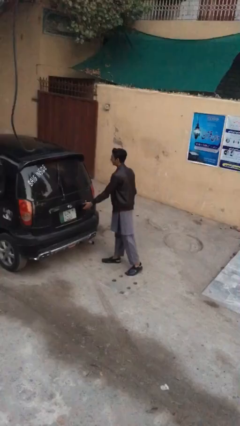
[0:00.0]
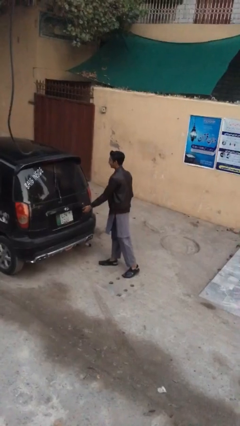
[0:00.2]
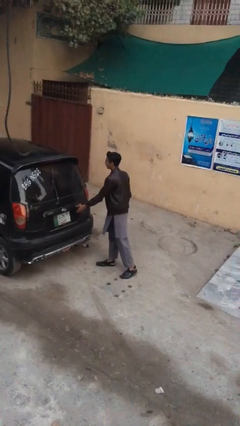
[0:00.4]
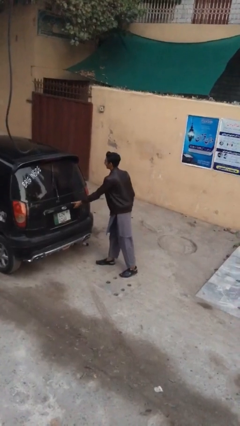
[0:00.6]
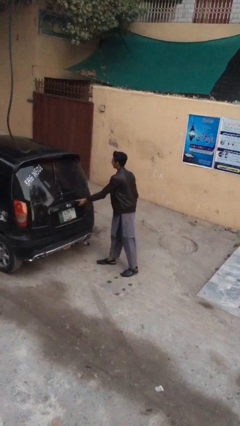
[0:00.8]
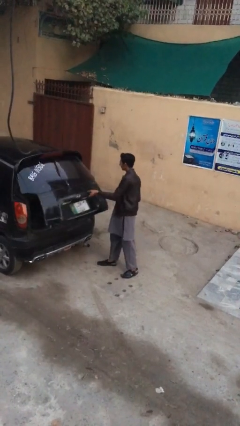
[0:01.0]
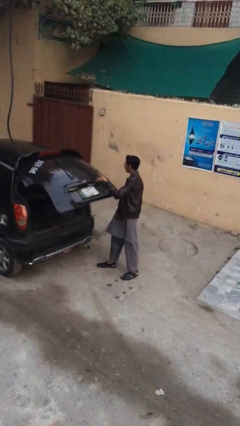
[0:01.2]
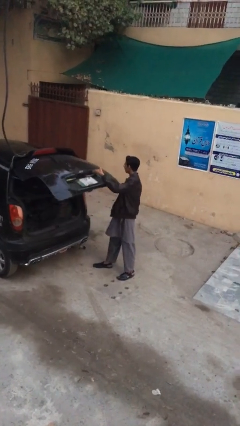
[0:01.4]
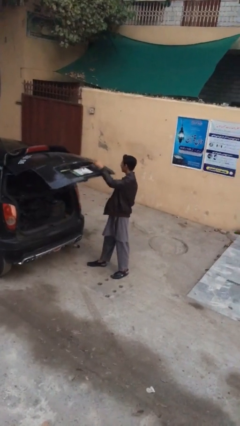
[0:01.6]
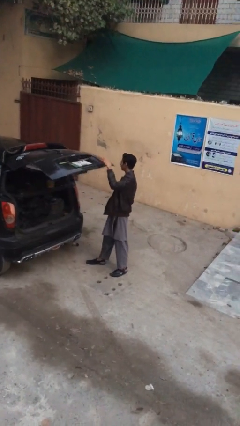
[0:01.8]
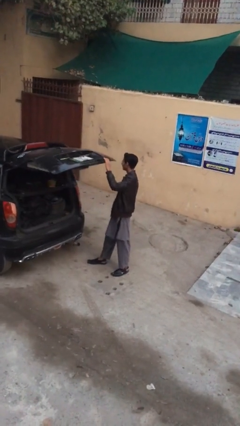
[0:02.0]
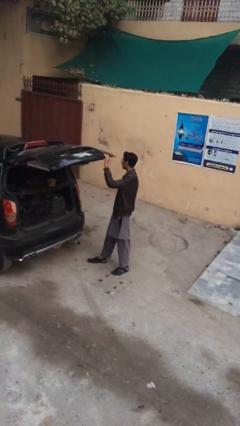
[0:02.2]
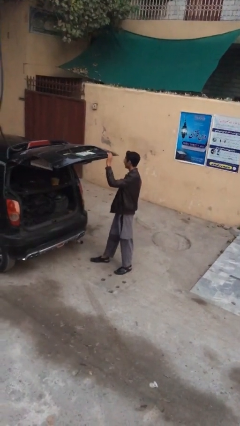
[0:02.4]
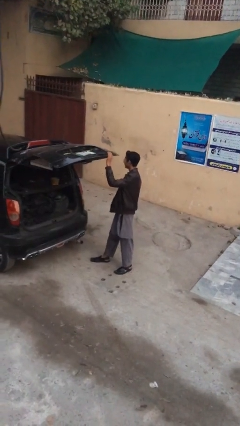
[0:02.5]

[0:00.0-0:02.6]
person opens car trunk

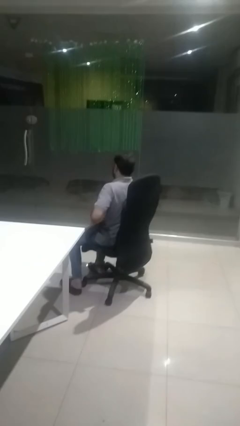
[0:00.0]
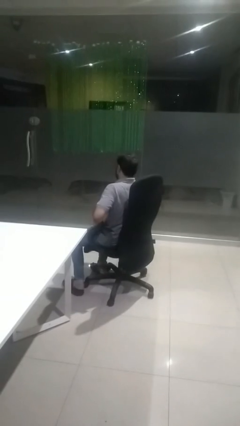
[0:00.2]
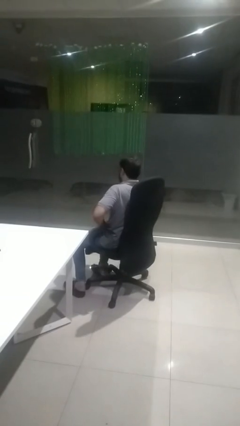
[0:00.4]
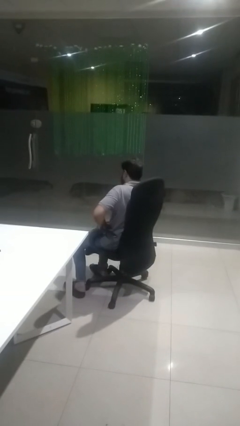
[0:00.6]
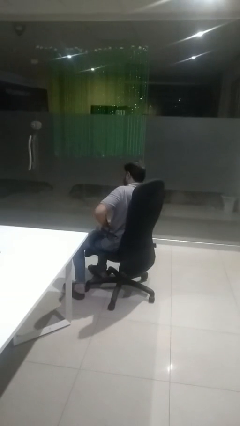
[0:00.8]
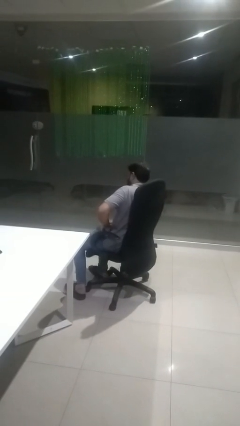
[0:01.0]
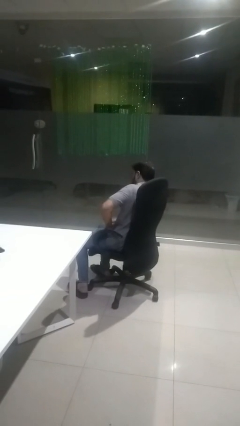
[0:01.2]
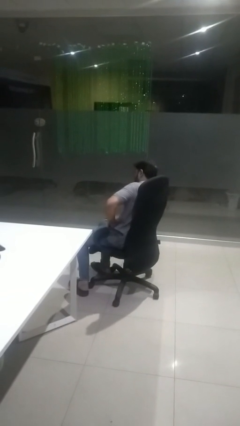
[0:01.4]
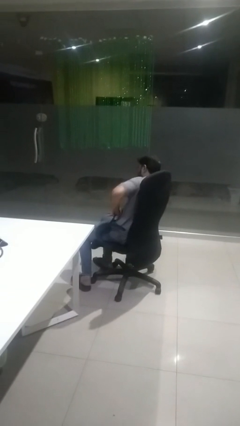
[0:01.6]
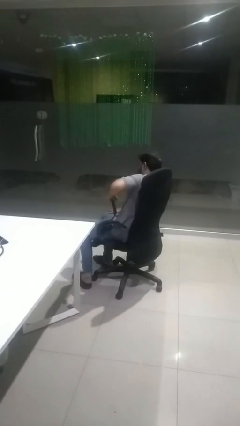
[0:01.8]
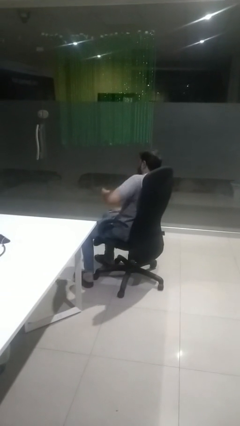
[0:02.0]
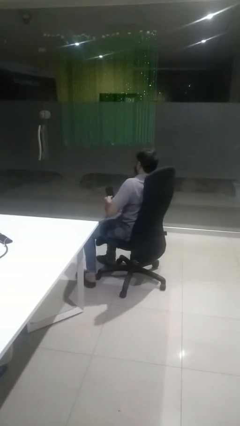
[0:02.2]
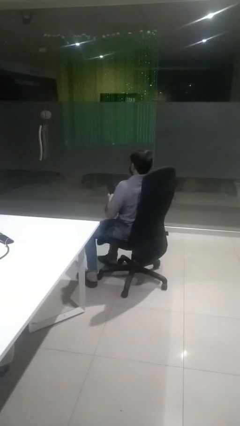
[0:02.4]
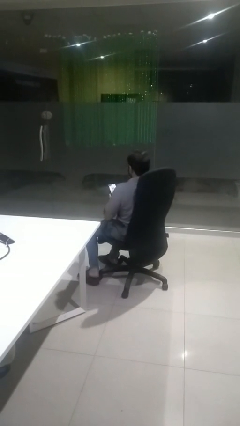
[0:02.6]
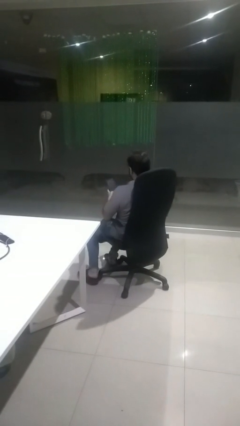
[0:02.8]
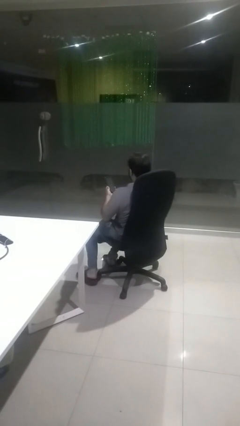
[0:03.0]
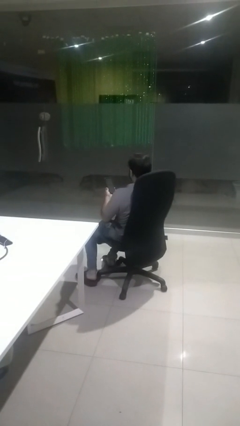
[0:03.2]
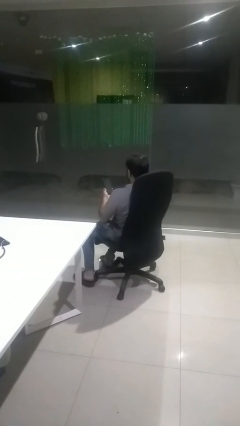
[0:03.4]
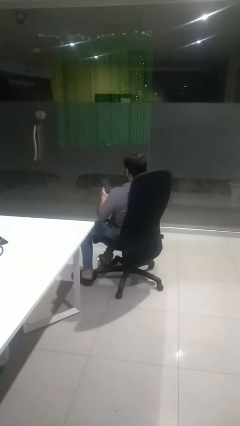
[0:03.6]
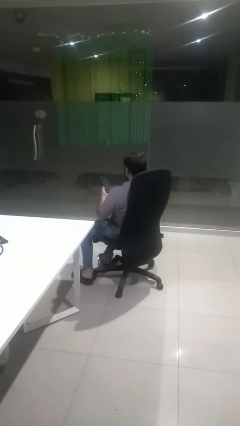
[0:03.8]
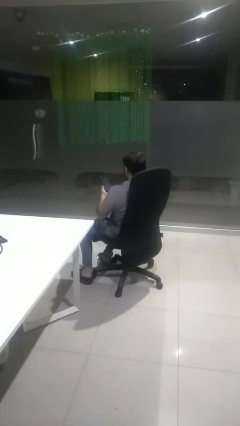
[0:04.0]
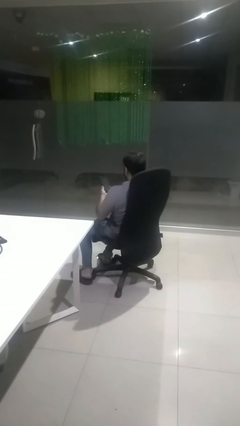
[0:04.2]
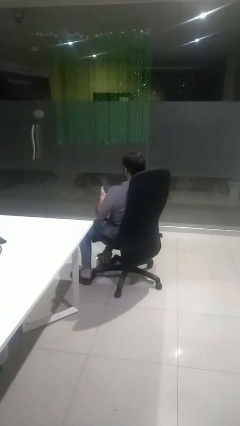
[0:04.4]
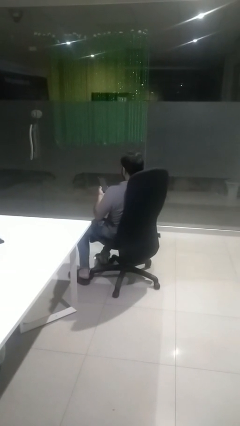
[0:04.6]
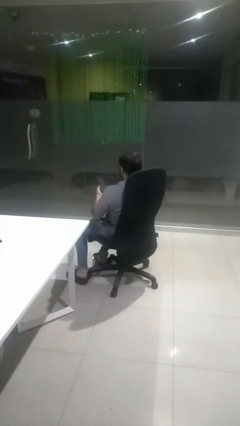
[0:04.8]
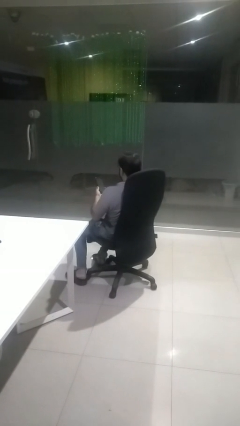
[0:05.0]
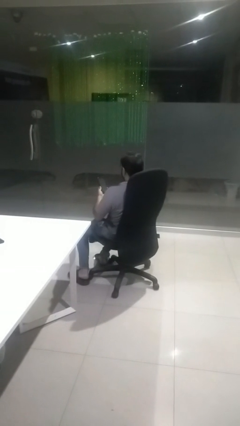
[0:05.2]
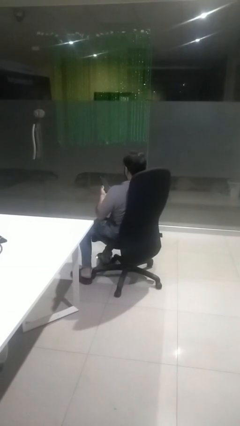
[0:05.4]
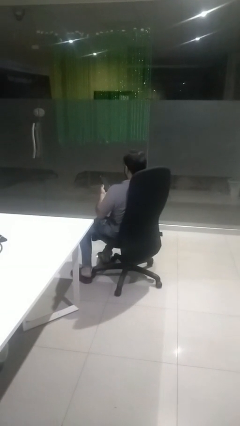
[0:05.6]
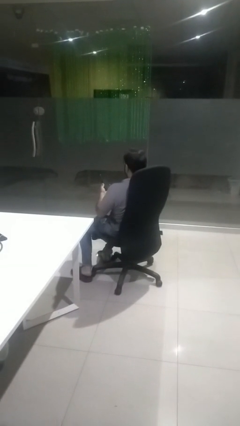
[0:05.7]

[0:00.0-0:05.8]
person takes phone from pocket

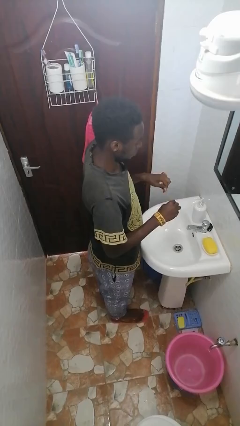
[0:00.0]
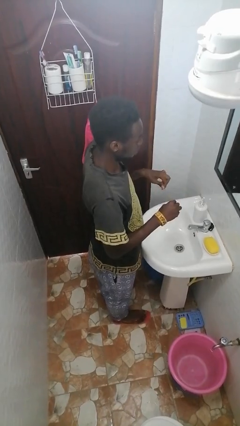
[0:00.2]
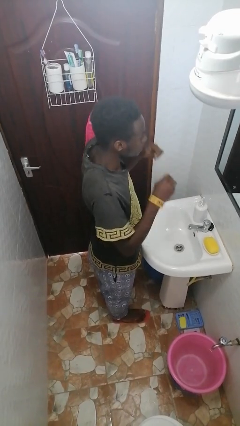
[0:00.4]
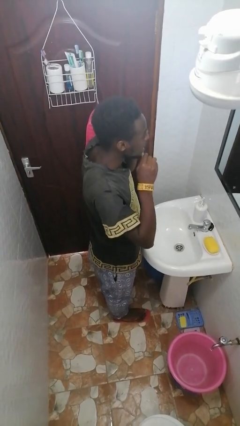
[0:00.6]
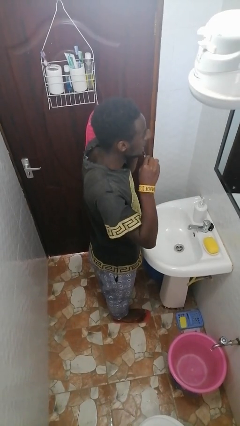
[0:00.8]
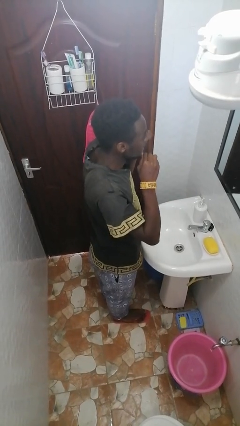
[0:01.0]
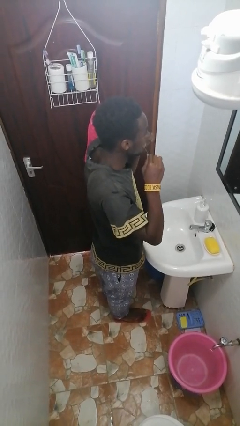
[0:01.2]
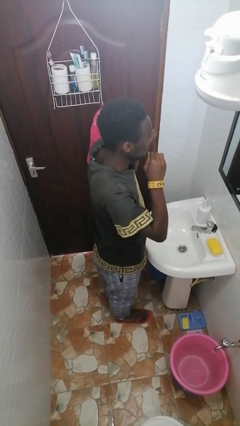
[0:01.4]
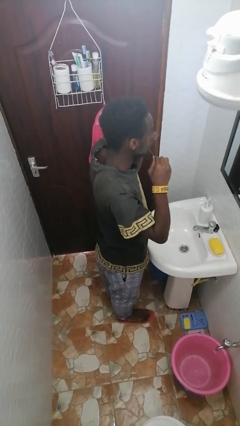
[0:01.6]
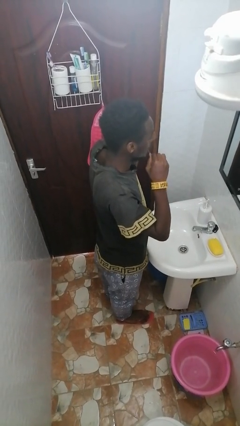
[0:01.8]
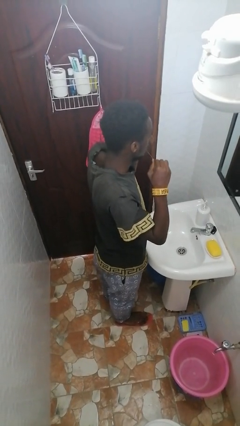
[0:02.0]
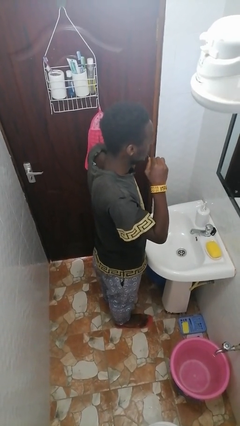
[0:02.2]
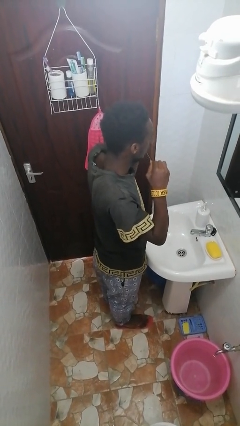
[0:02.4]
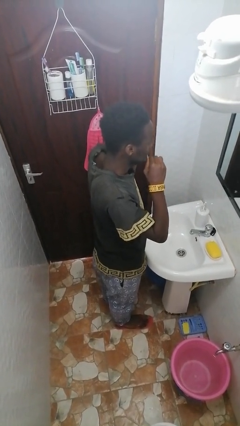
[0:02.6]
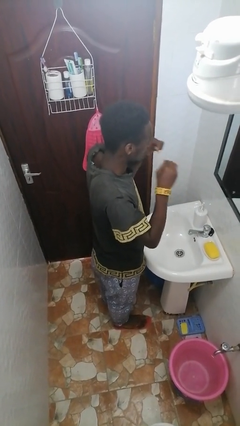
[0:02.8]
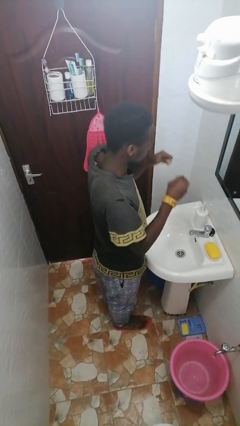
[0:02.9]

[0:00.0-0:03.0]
person flosses

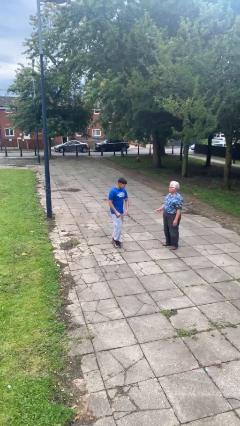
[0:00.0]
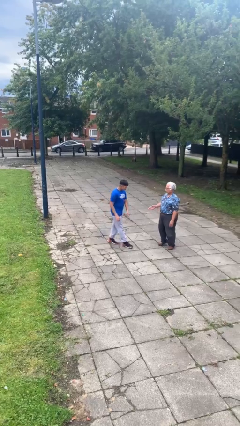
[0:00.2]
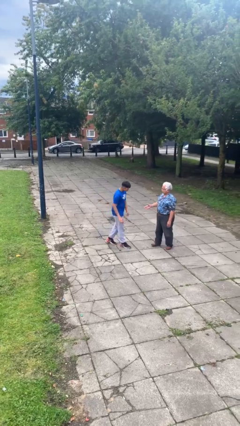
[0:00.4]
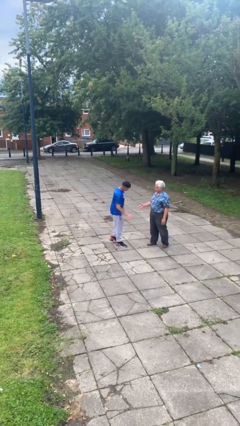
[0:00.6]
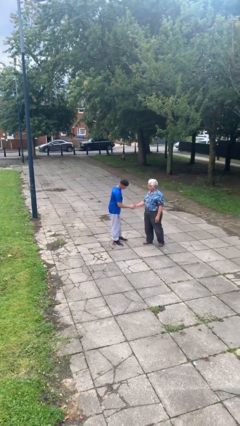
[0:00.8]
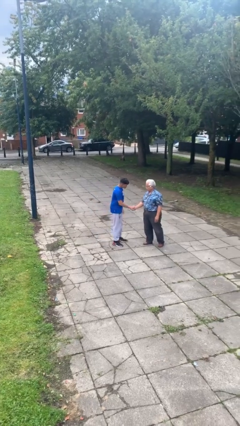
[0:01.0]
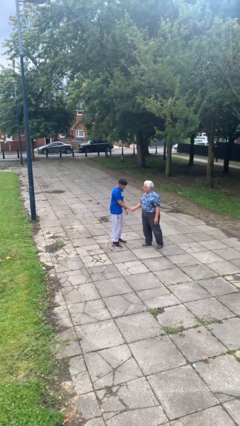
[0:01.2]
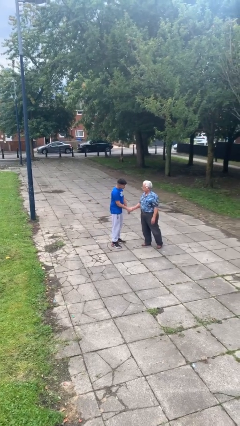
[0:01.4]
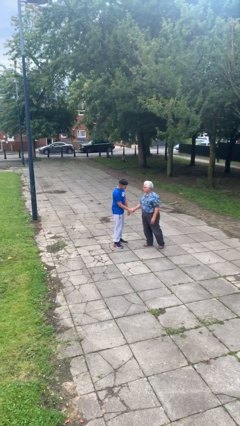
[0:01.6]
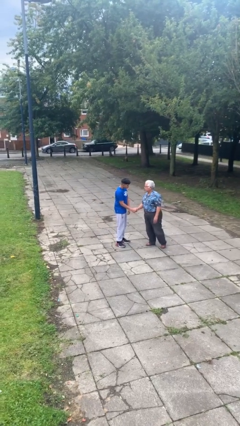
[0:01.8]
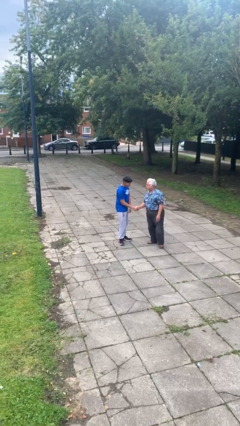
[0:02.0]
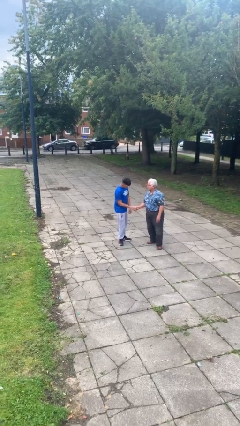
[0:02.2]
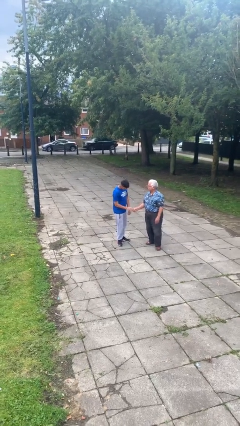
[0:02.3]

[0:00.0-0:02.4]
person shakes hand

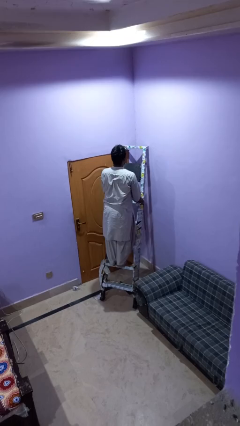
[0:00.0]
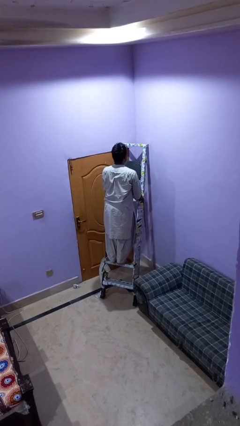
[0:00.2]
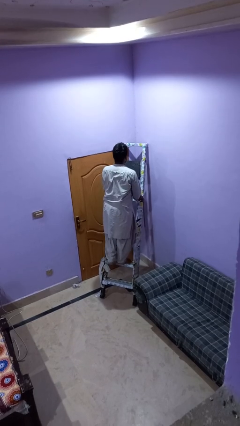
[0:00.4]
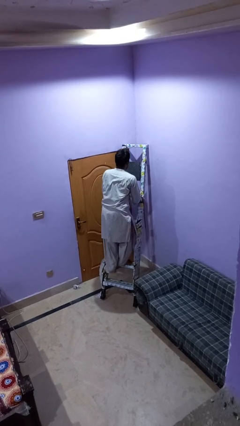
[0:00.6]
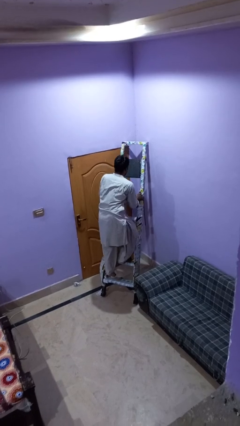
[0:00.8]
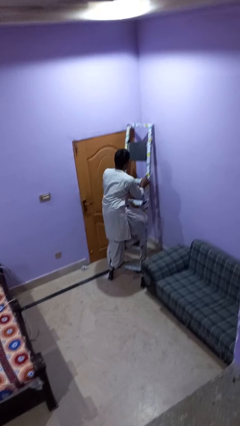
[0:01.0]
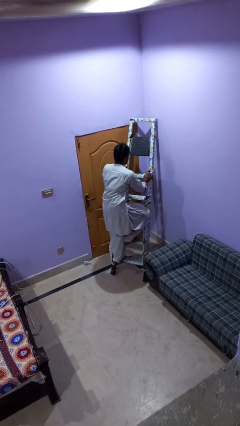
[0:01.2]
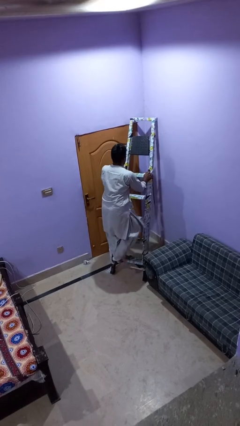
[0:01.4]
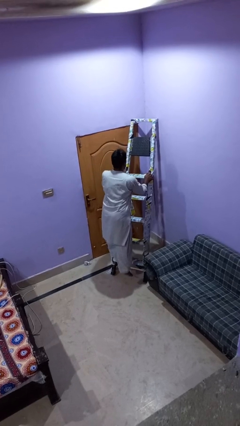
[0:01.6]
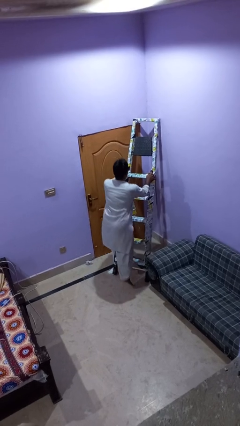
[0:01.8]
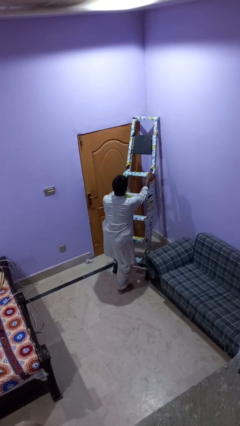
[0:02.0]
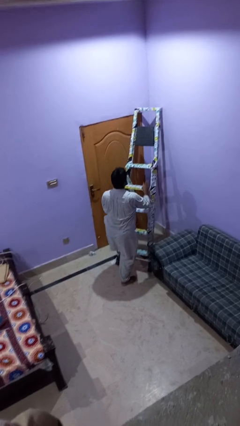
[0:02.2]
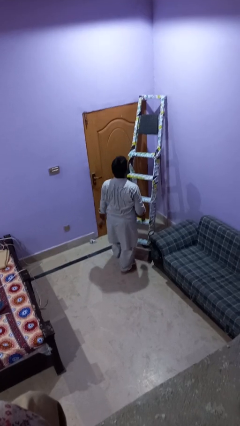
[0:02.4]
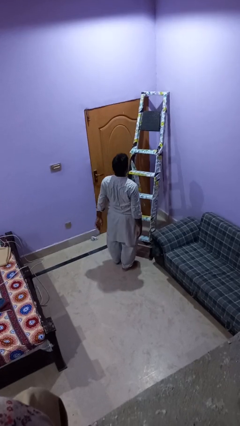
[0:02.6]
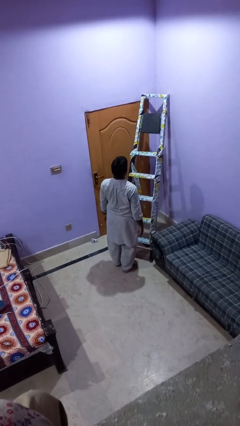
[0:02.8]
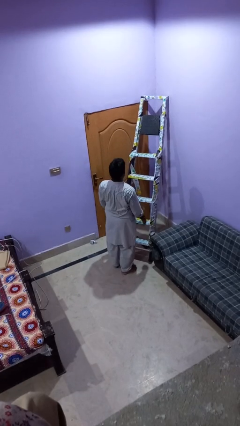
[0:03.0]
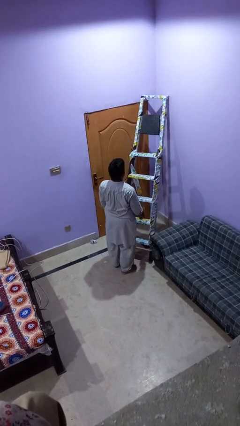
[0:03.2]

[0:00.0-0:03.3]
person climbs off chair

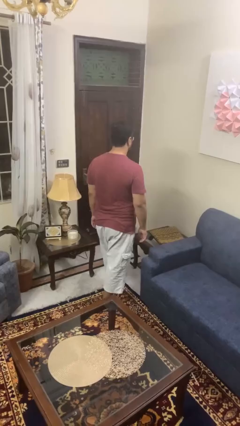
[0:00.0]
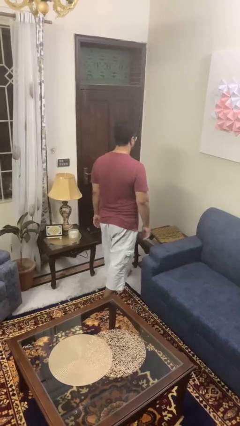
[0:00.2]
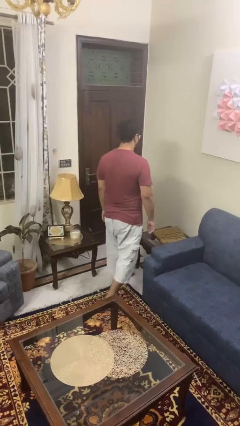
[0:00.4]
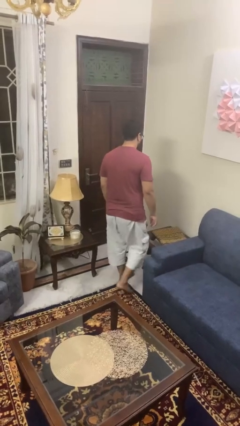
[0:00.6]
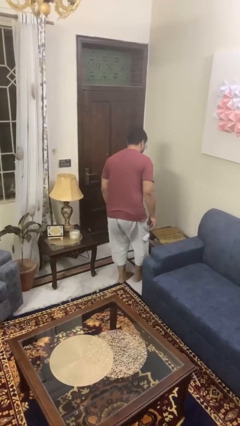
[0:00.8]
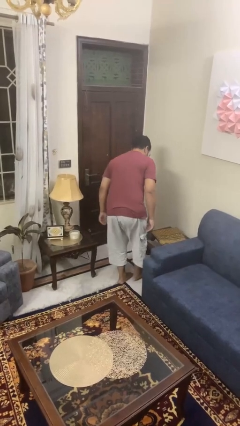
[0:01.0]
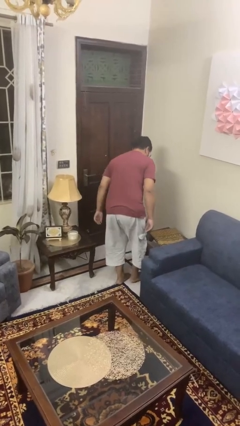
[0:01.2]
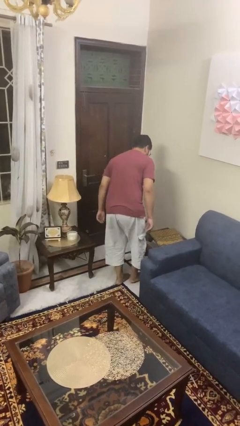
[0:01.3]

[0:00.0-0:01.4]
person bumps into table
